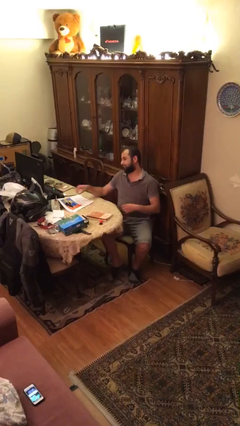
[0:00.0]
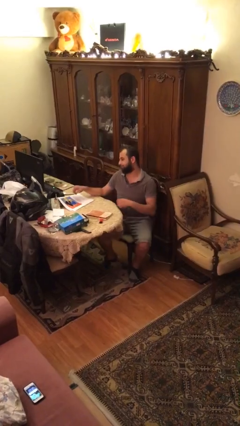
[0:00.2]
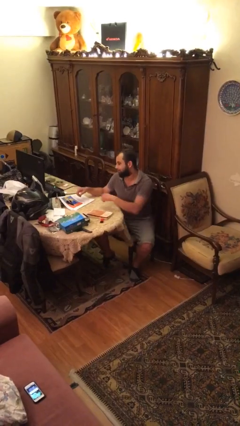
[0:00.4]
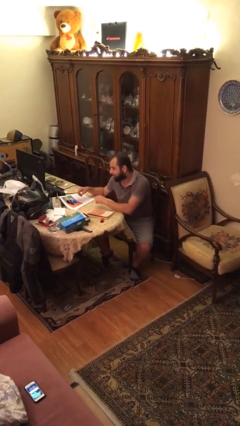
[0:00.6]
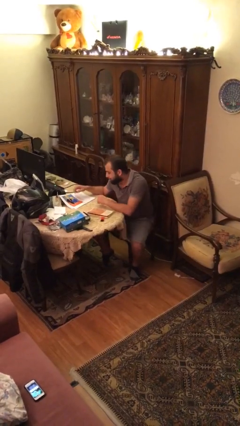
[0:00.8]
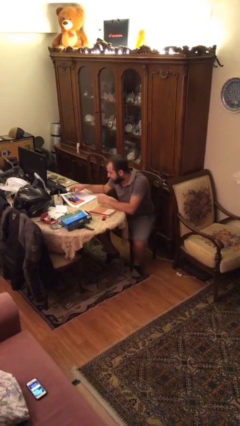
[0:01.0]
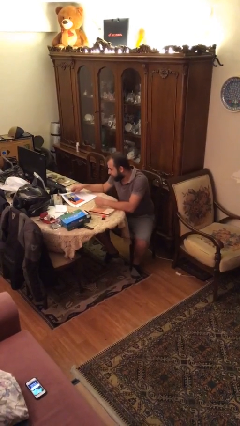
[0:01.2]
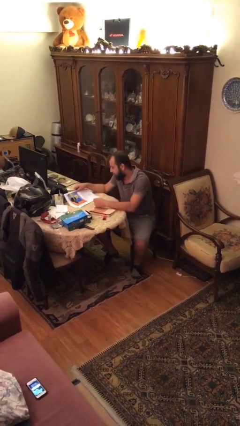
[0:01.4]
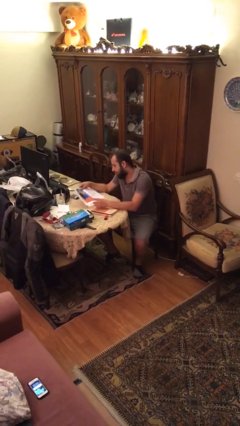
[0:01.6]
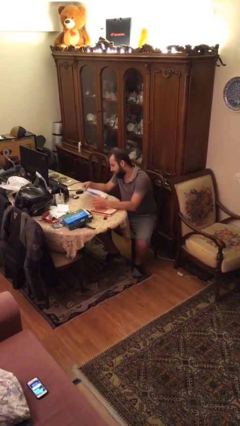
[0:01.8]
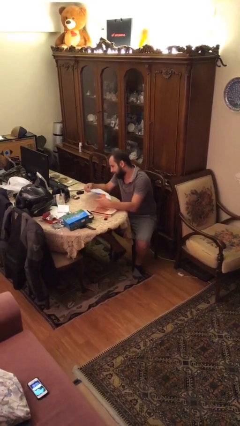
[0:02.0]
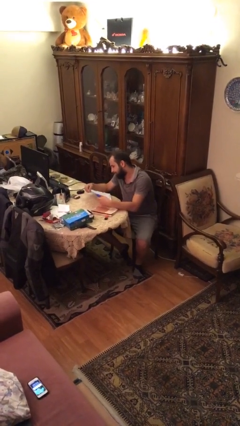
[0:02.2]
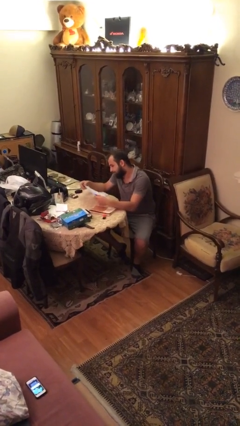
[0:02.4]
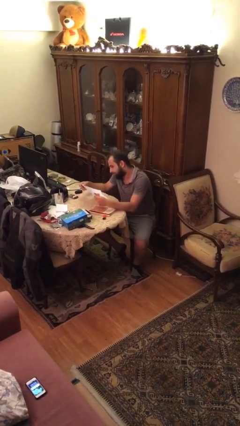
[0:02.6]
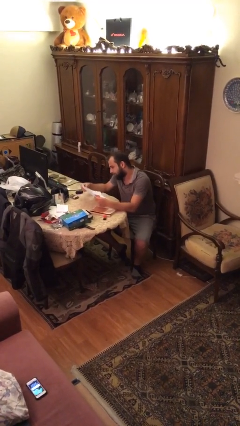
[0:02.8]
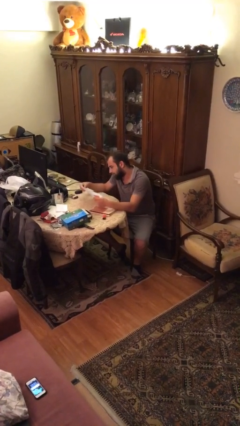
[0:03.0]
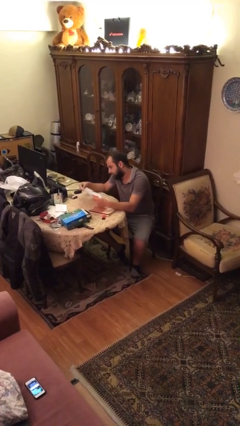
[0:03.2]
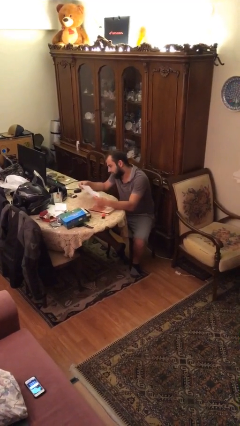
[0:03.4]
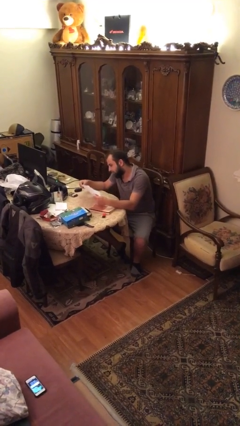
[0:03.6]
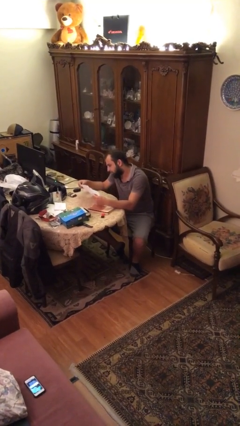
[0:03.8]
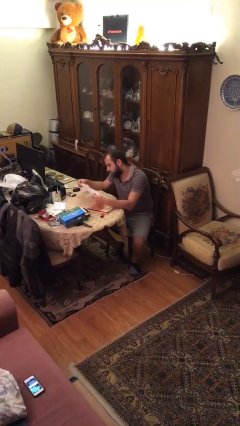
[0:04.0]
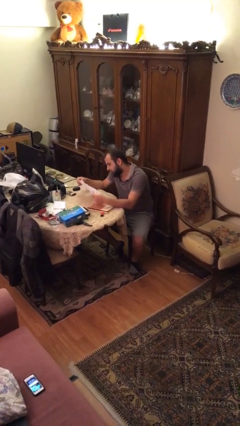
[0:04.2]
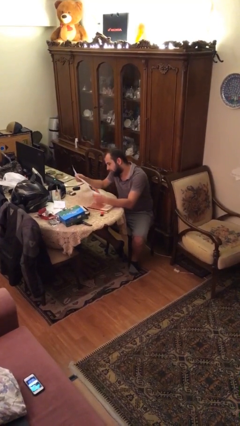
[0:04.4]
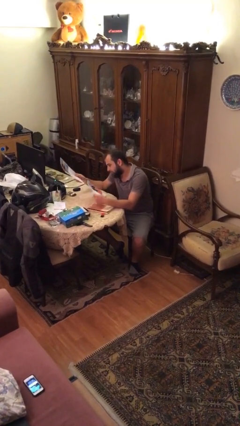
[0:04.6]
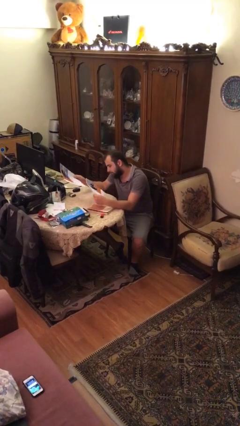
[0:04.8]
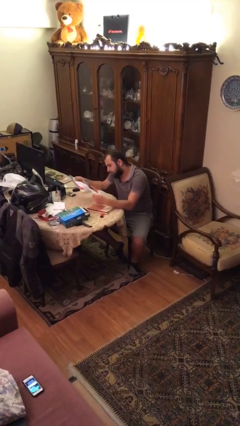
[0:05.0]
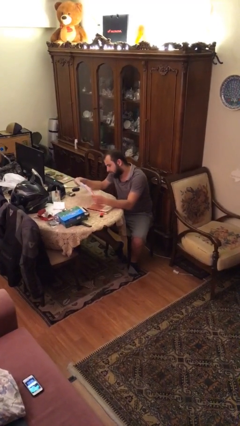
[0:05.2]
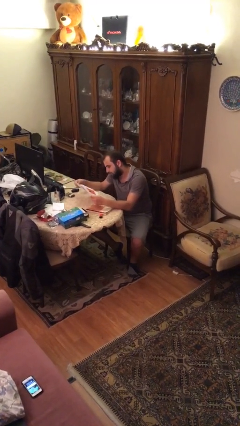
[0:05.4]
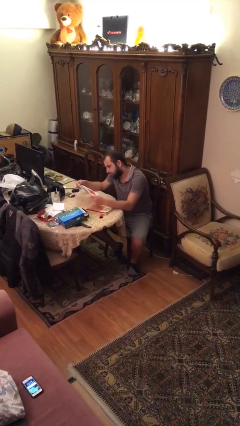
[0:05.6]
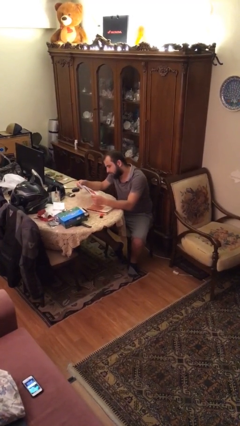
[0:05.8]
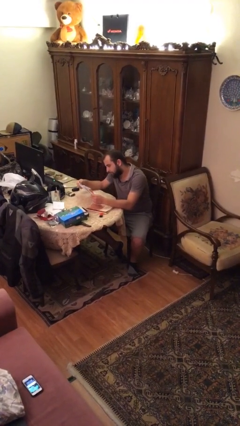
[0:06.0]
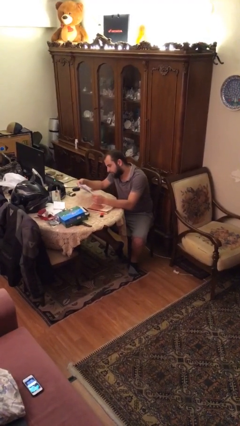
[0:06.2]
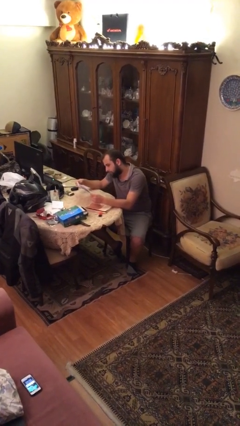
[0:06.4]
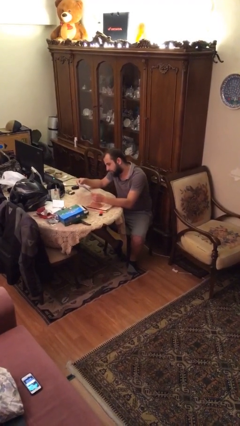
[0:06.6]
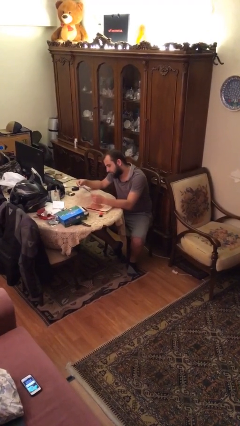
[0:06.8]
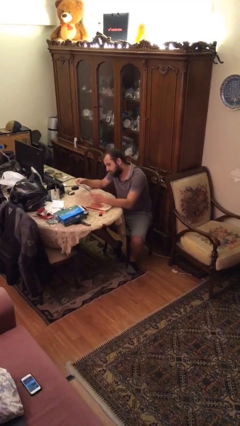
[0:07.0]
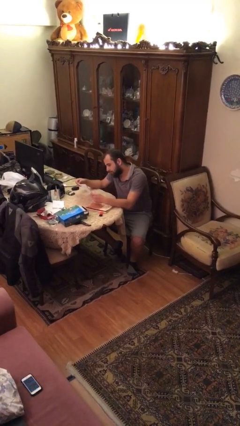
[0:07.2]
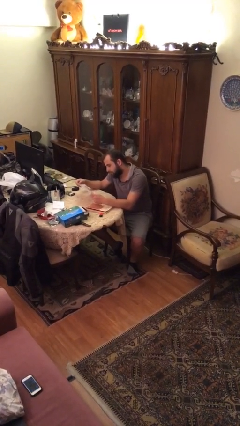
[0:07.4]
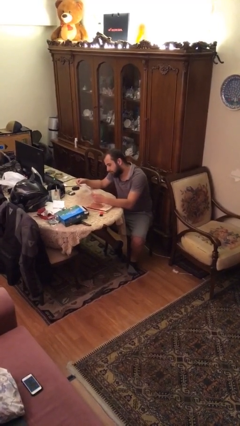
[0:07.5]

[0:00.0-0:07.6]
person reads document

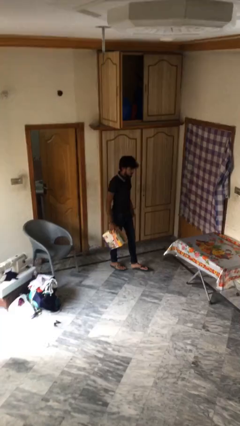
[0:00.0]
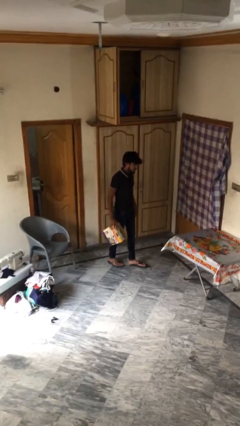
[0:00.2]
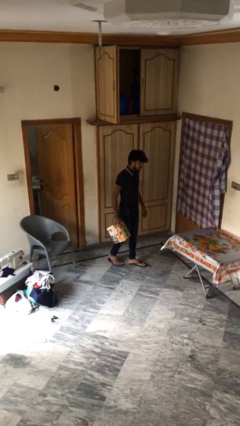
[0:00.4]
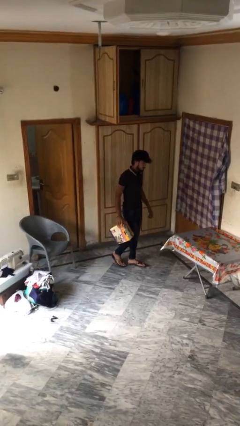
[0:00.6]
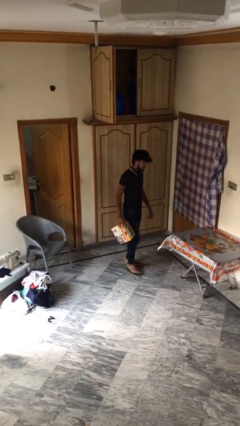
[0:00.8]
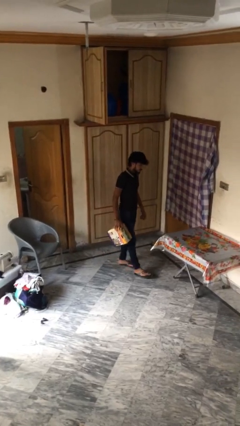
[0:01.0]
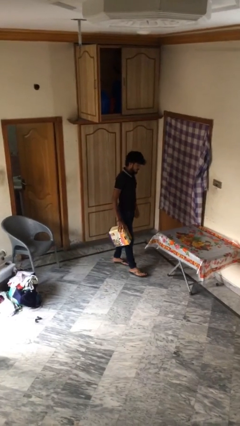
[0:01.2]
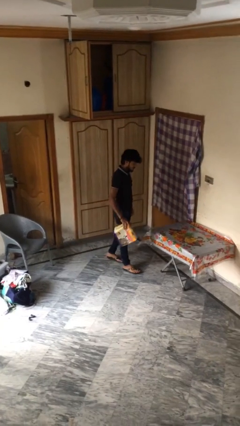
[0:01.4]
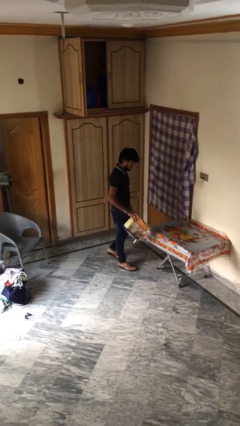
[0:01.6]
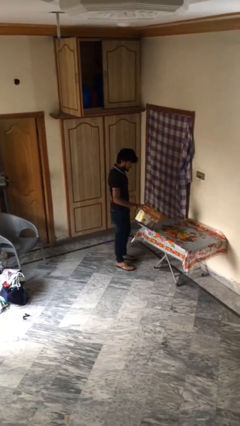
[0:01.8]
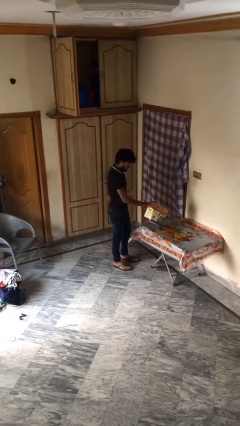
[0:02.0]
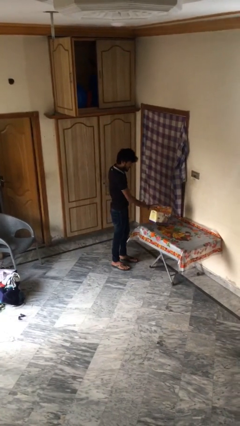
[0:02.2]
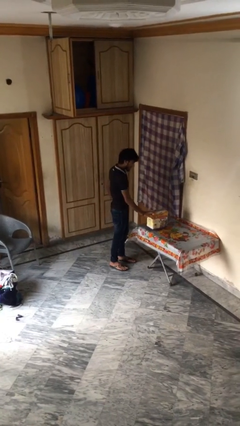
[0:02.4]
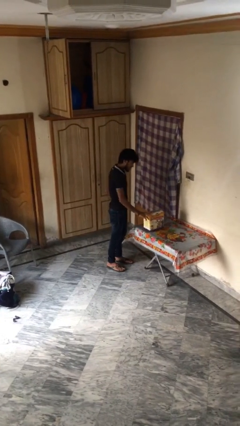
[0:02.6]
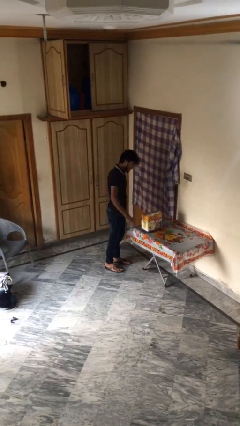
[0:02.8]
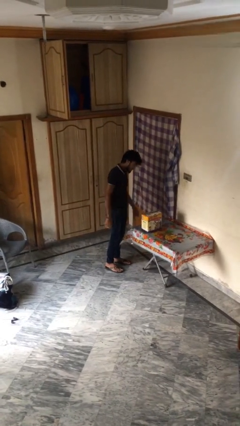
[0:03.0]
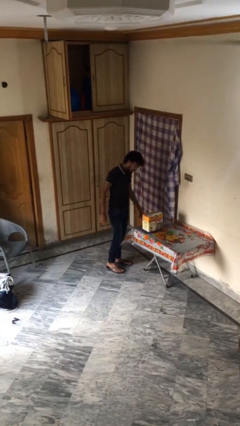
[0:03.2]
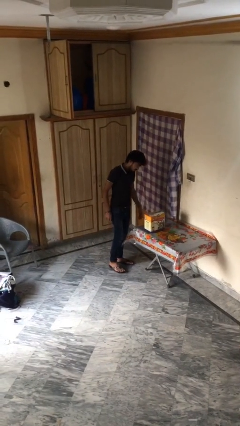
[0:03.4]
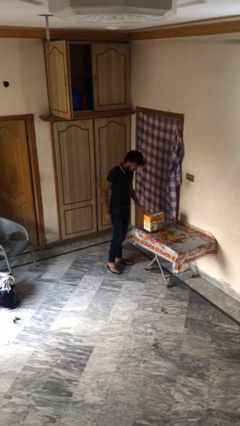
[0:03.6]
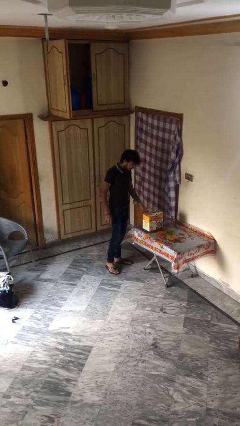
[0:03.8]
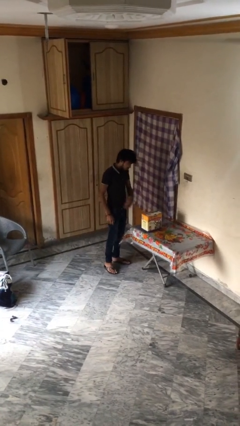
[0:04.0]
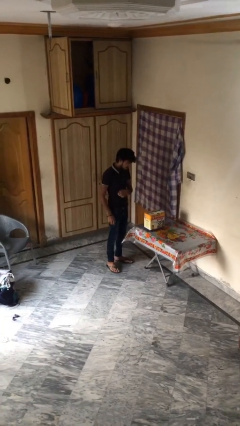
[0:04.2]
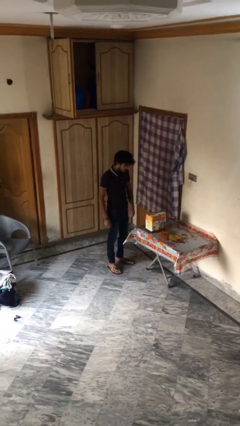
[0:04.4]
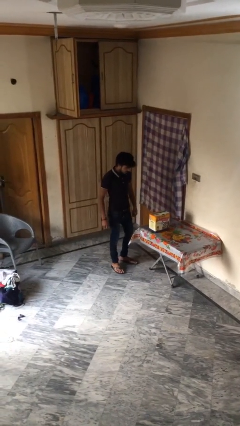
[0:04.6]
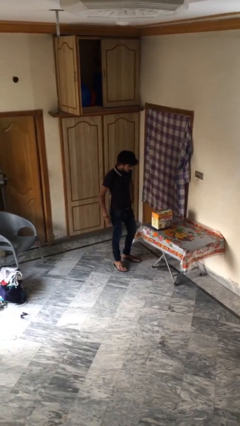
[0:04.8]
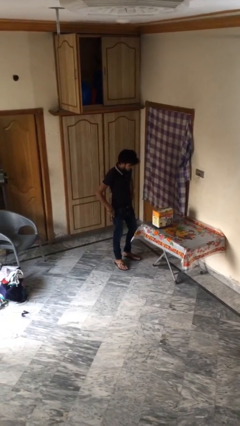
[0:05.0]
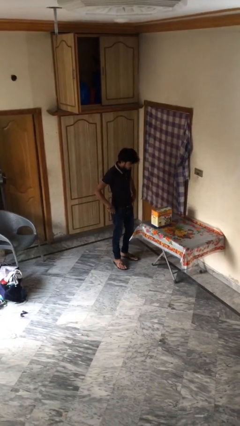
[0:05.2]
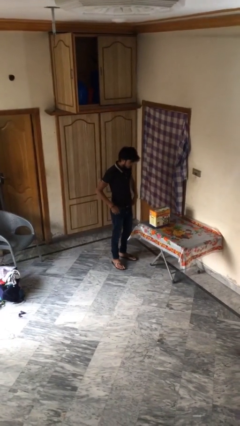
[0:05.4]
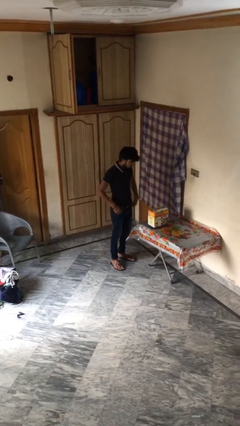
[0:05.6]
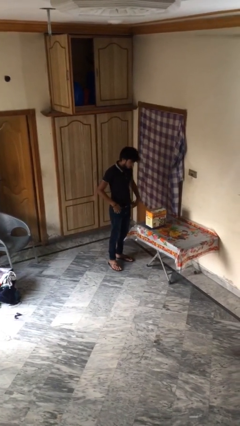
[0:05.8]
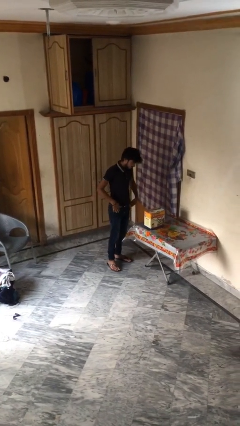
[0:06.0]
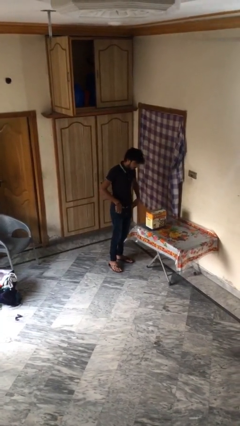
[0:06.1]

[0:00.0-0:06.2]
person puts down object on table

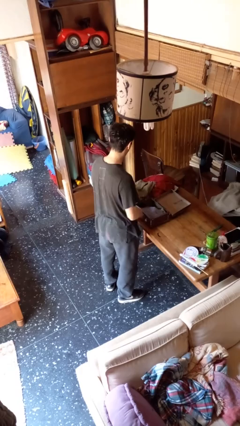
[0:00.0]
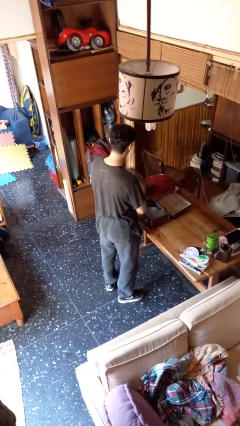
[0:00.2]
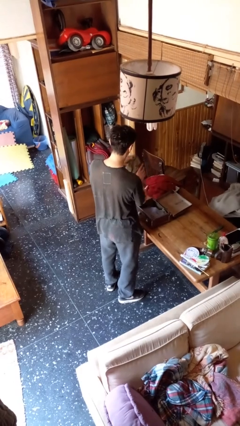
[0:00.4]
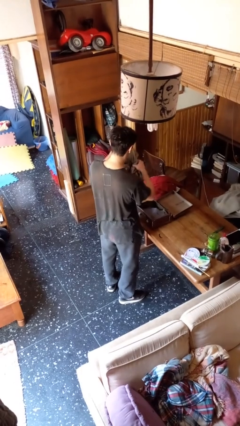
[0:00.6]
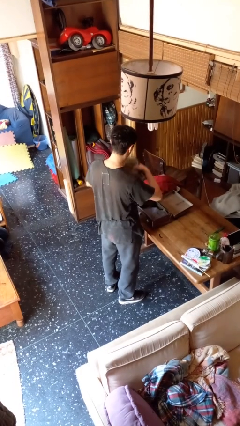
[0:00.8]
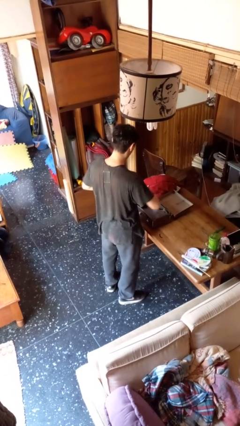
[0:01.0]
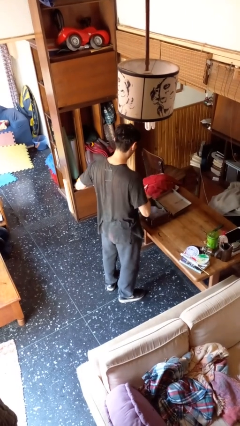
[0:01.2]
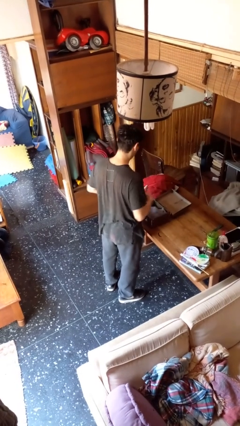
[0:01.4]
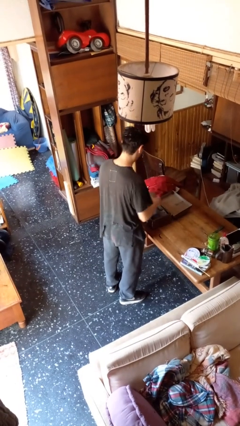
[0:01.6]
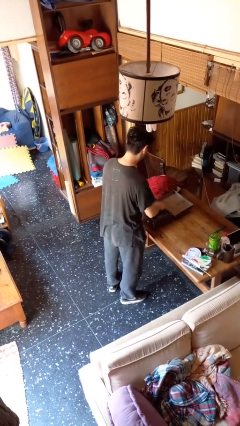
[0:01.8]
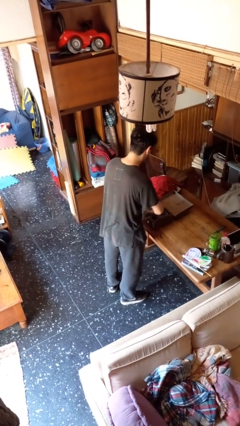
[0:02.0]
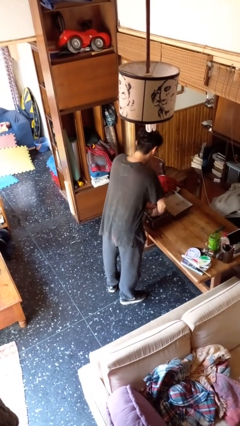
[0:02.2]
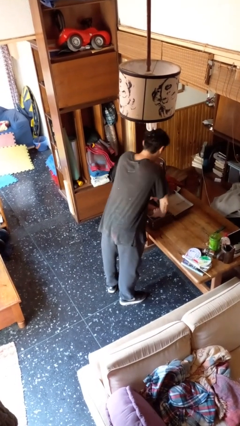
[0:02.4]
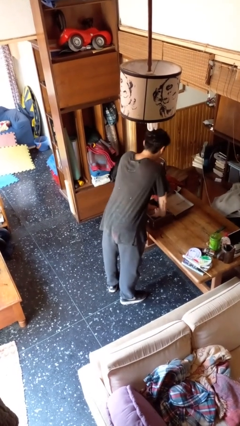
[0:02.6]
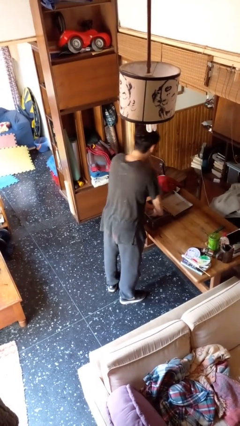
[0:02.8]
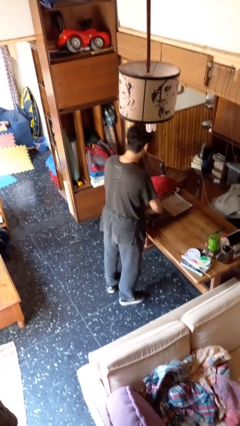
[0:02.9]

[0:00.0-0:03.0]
person loads clothes into suitcase

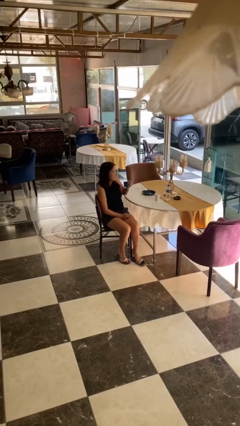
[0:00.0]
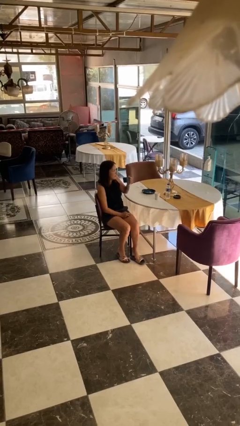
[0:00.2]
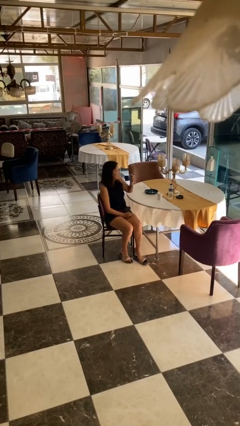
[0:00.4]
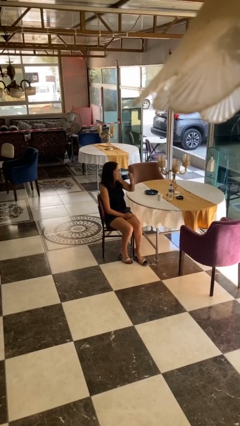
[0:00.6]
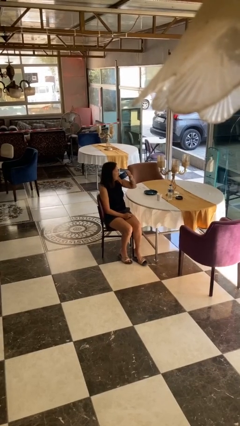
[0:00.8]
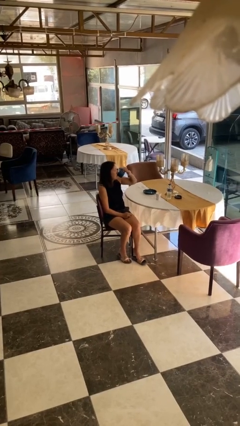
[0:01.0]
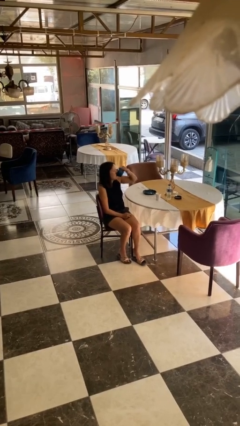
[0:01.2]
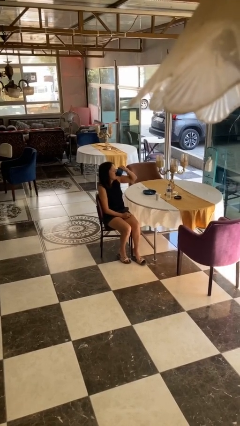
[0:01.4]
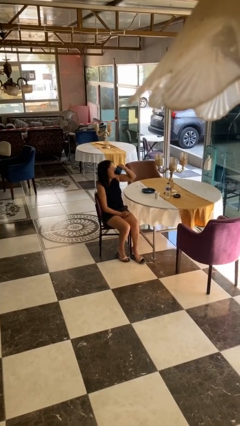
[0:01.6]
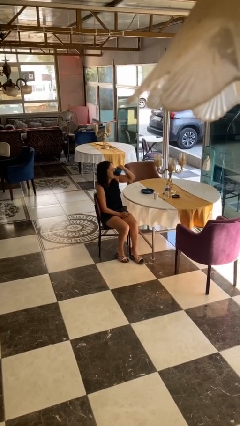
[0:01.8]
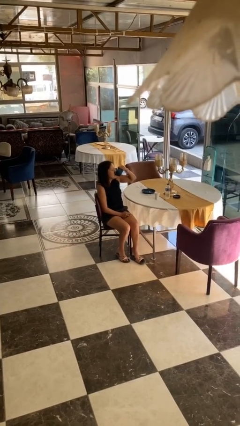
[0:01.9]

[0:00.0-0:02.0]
person drinks from mug
